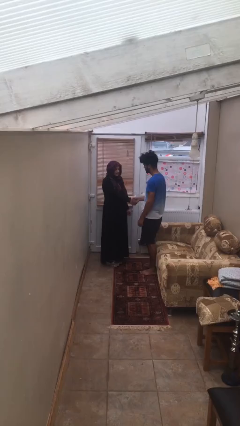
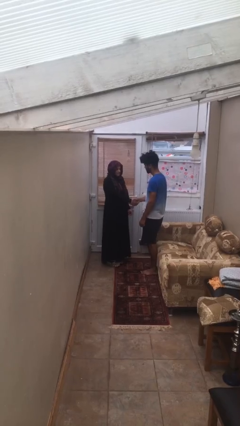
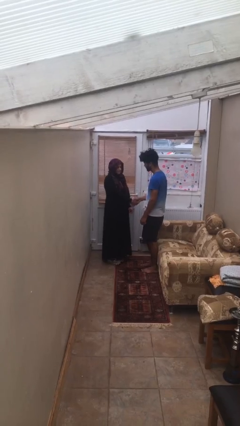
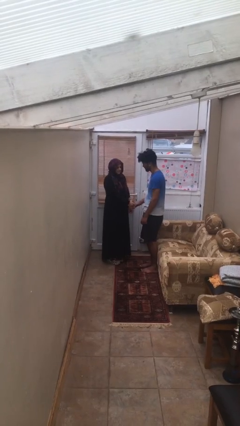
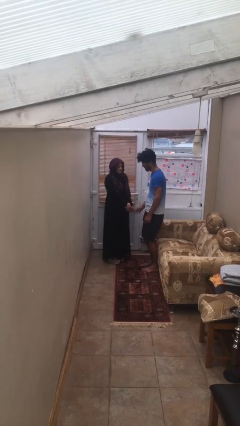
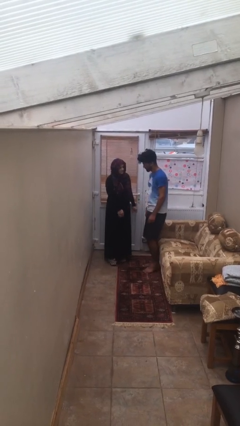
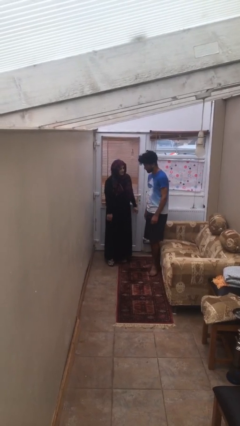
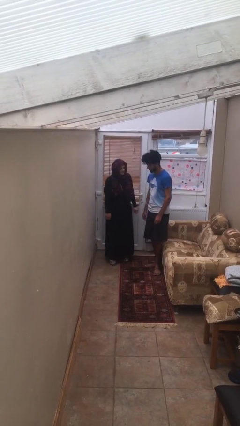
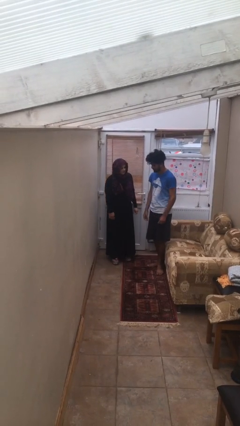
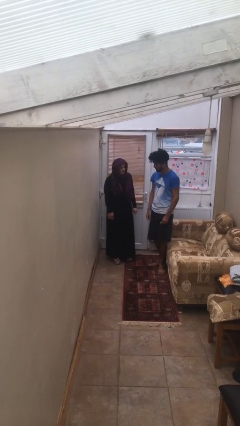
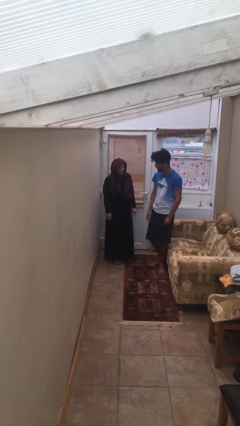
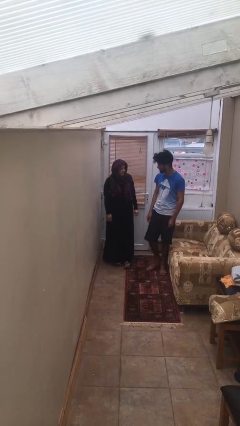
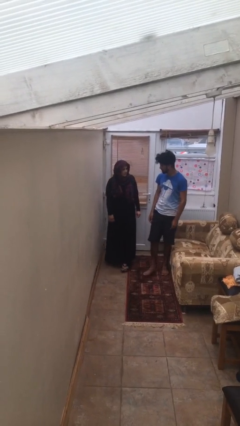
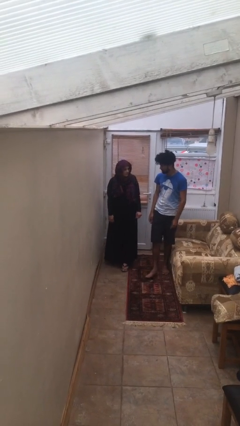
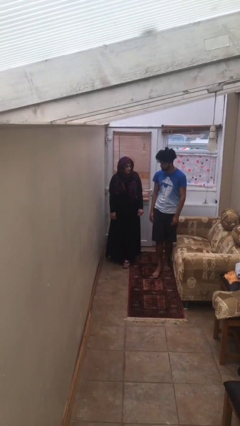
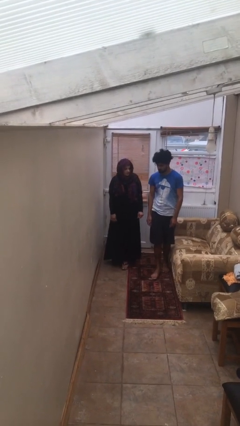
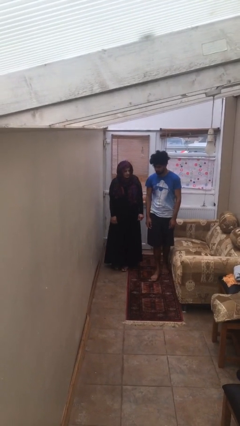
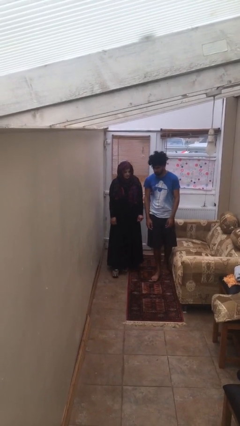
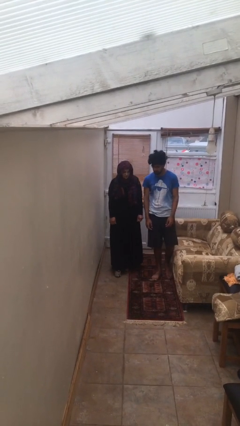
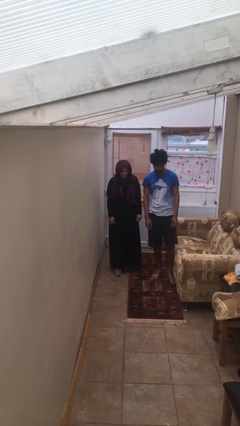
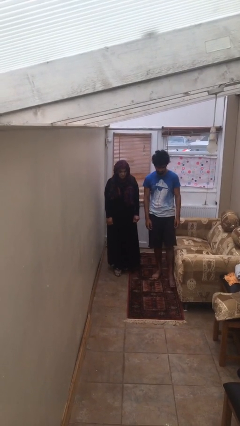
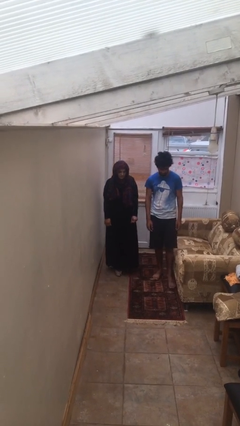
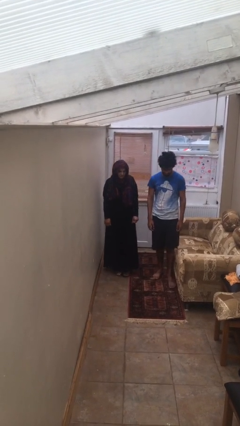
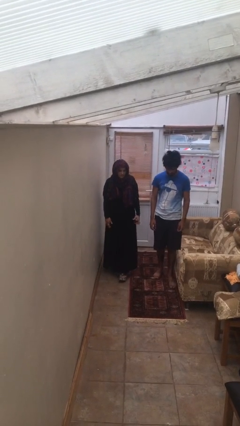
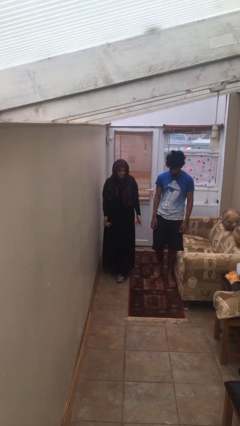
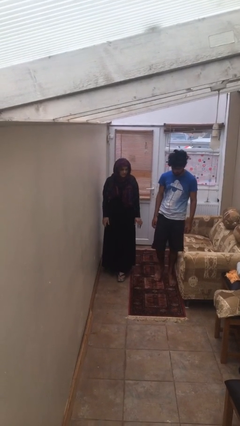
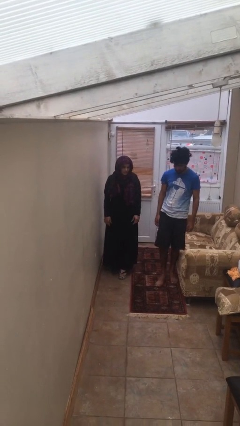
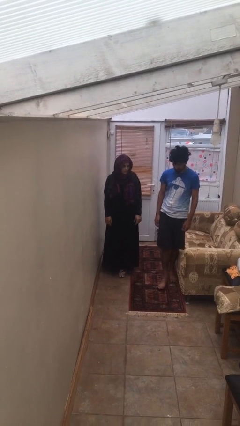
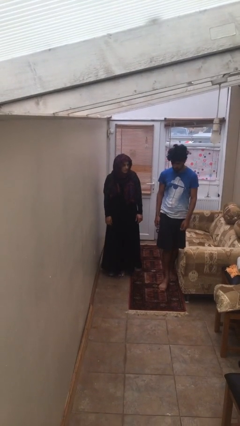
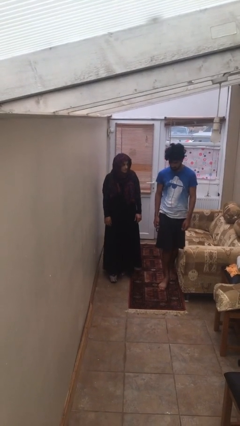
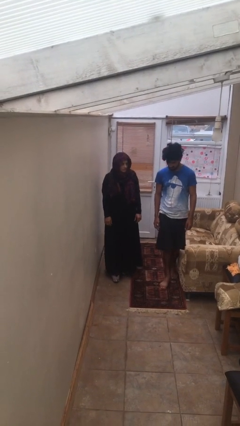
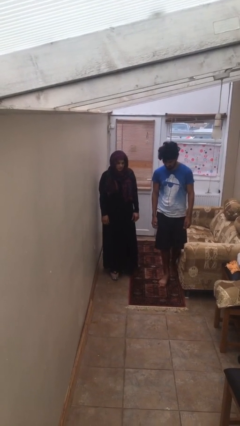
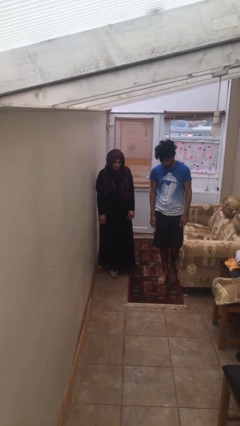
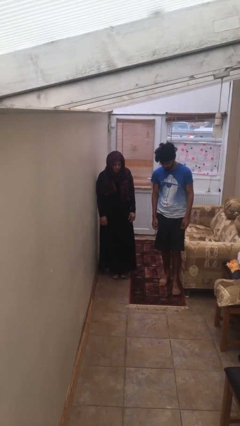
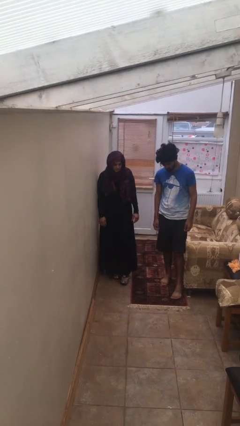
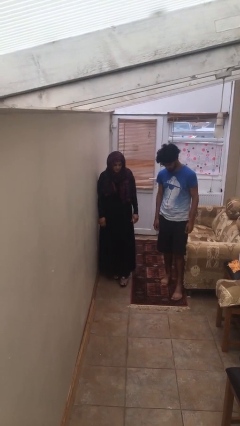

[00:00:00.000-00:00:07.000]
person talks to person

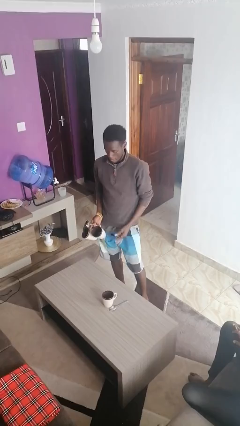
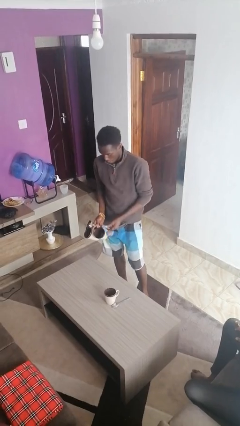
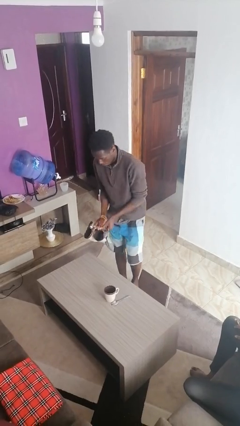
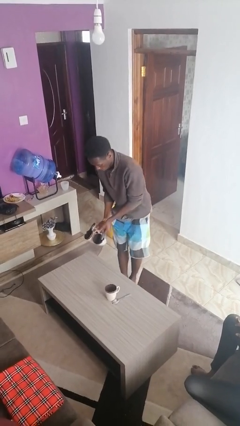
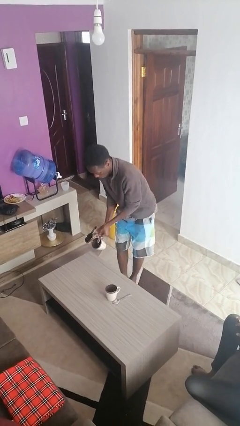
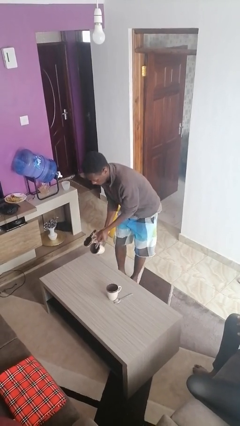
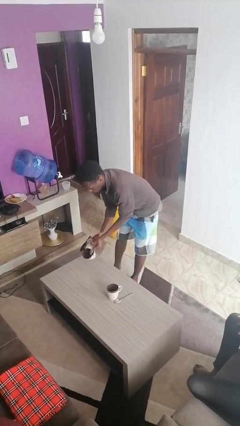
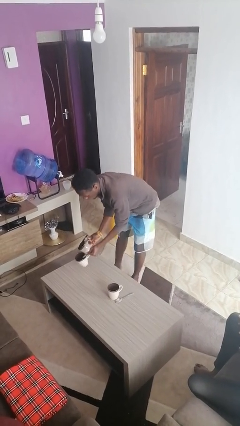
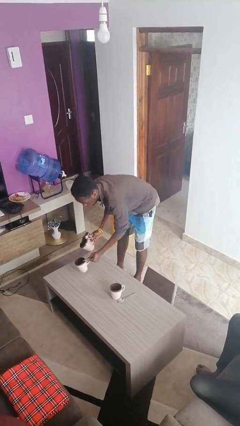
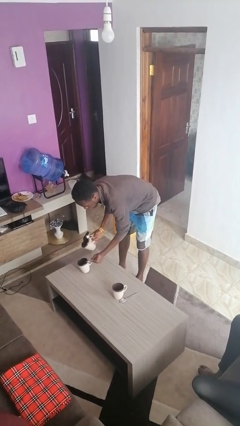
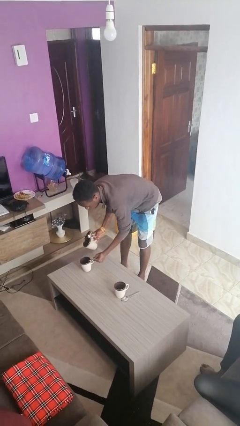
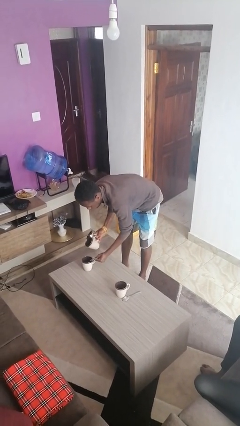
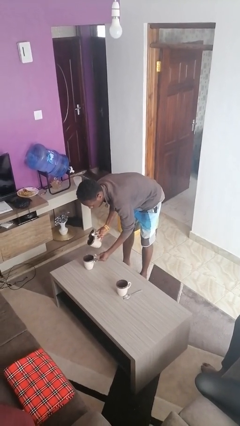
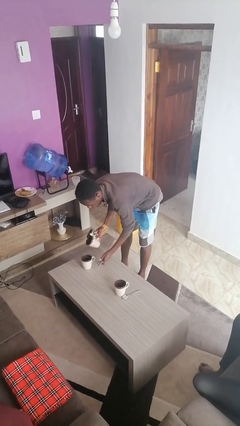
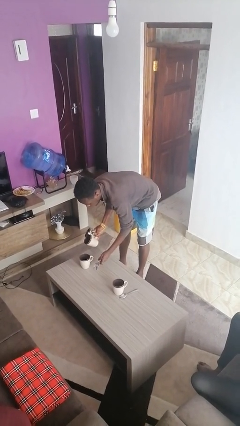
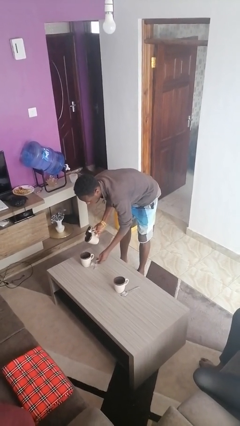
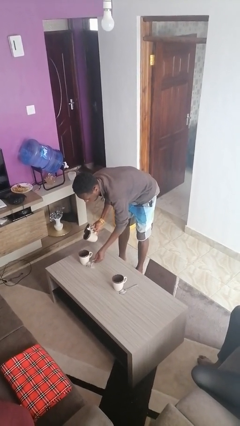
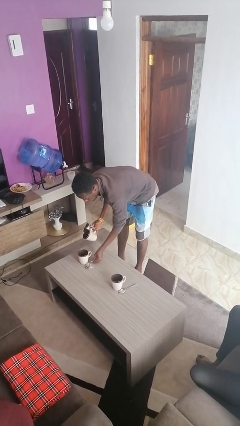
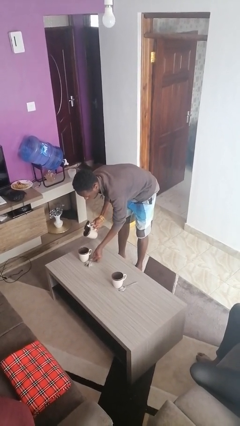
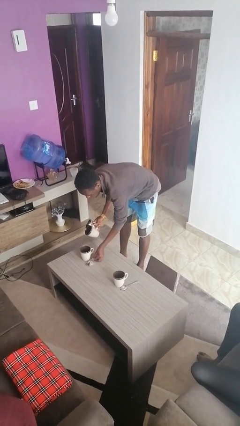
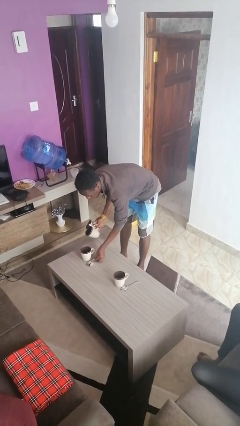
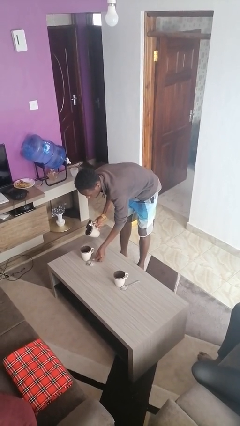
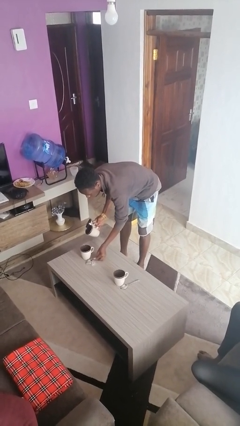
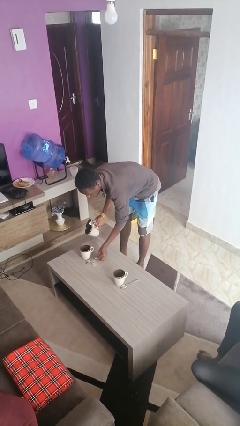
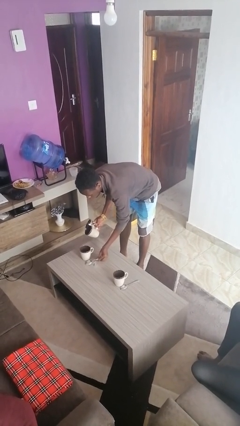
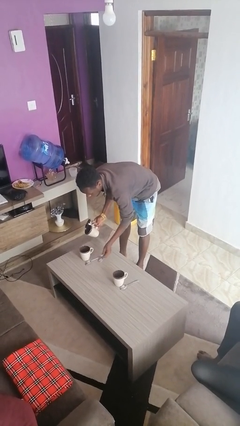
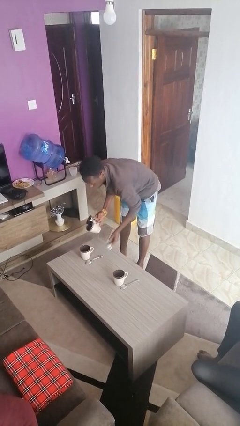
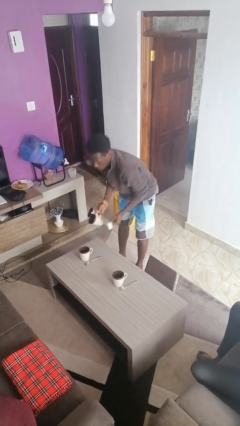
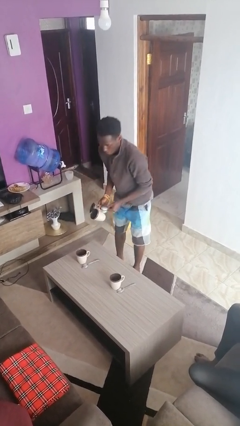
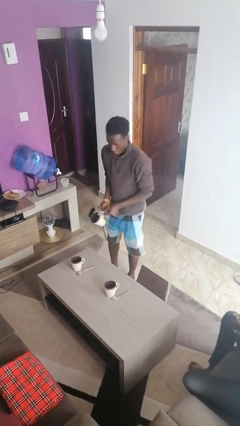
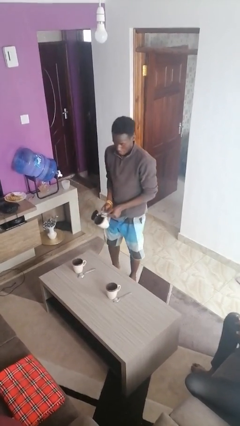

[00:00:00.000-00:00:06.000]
person sets table

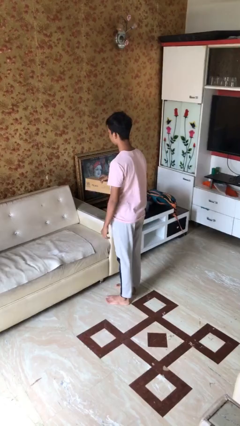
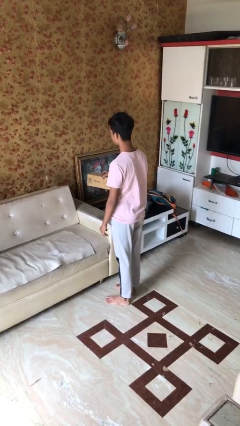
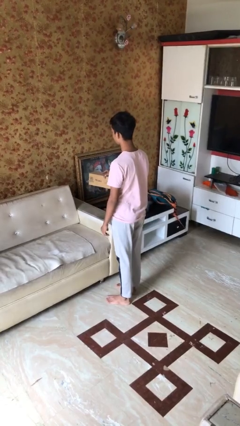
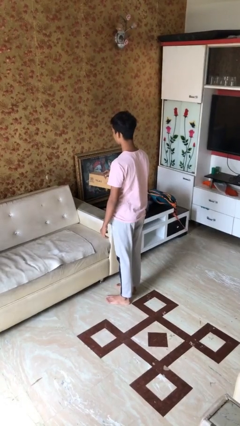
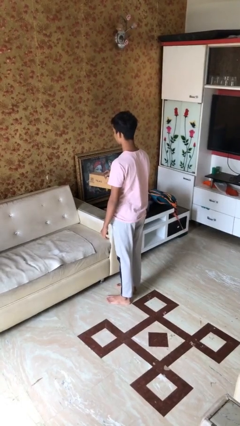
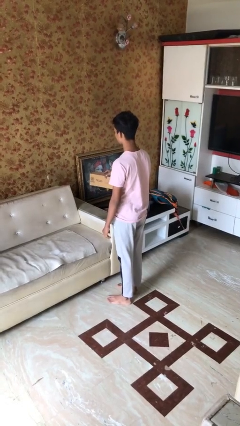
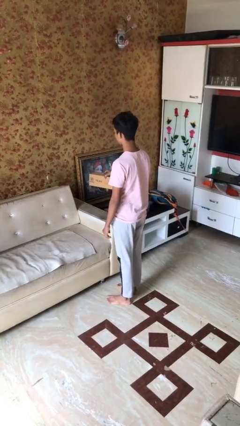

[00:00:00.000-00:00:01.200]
person picks up object from couch

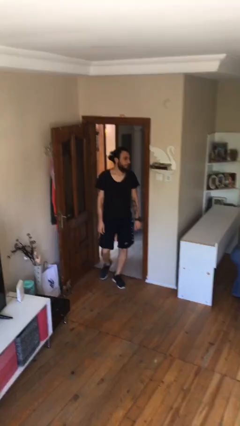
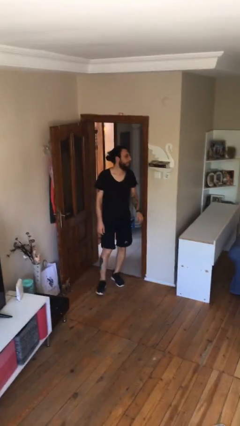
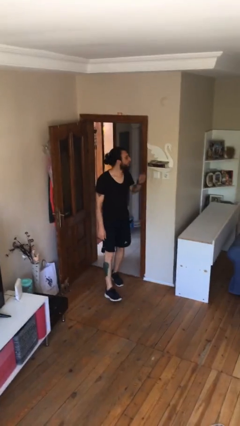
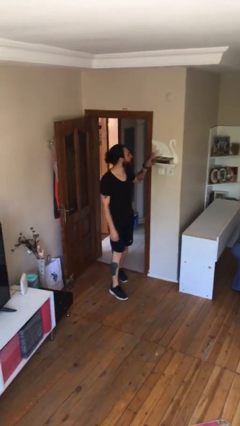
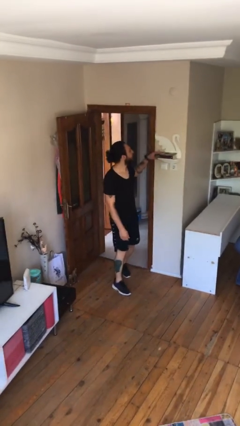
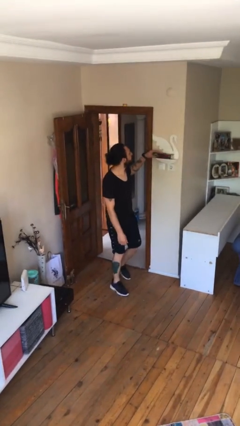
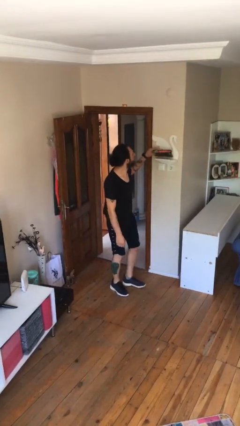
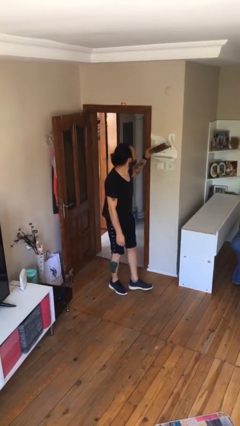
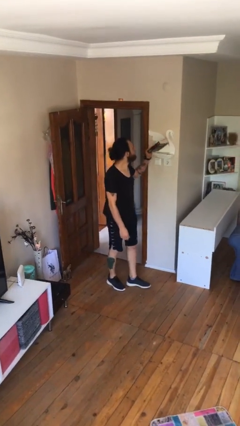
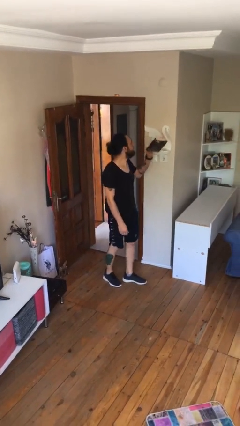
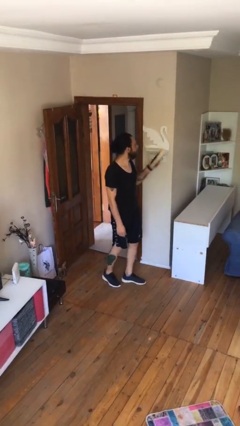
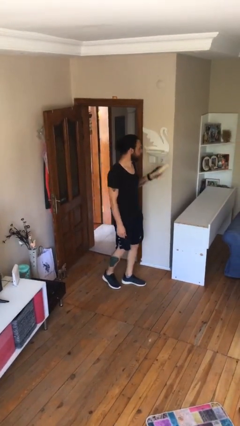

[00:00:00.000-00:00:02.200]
person picks up object from shelf

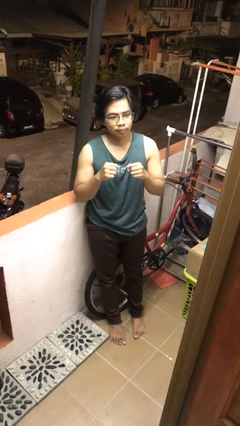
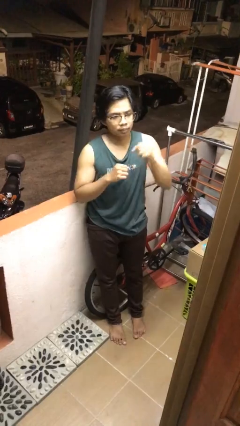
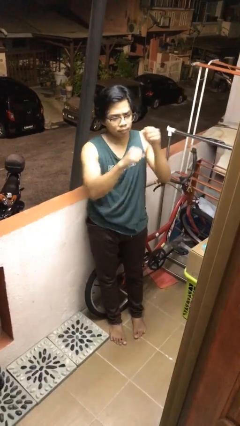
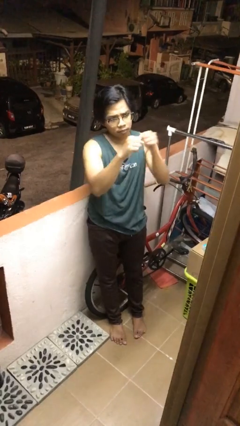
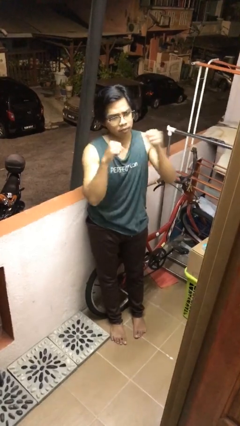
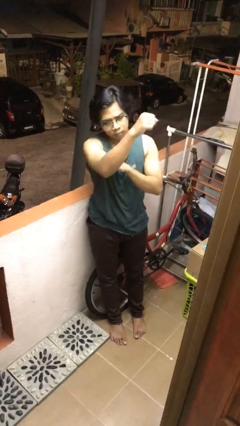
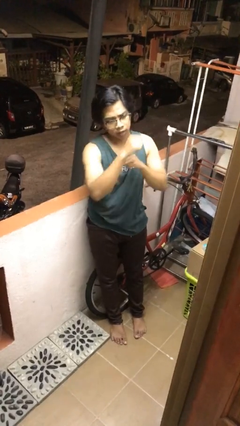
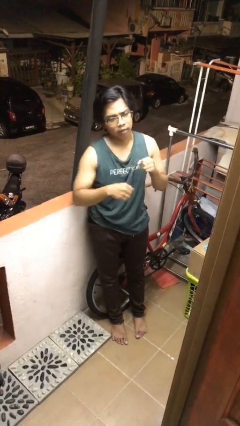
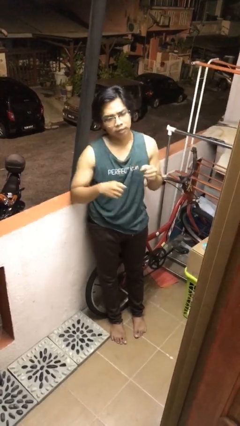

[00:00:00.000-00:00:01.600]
person punches
